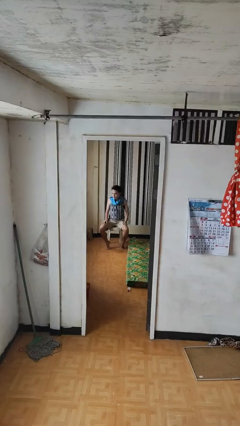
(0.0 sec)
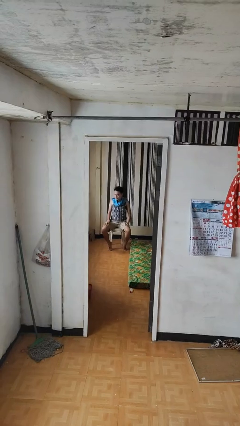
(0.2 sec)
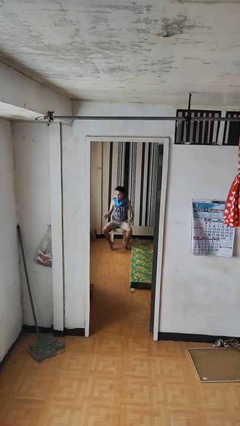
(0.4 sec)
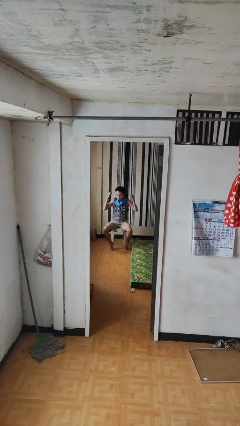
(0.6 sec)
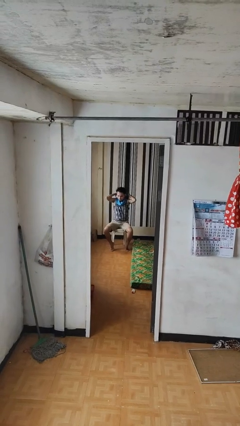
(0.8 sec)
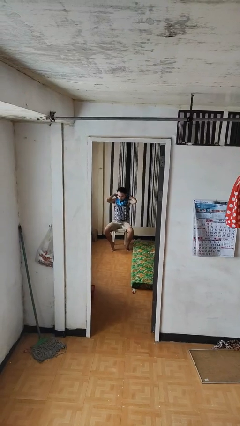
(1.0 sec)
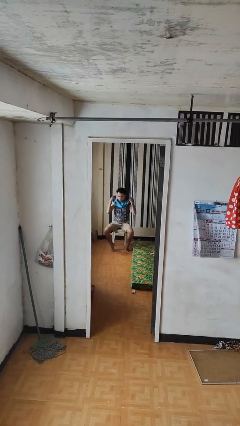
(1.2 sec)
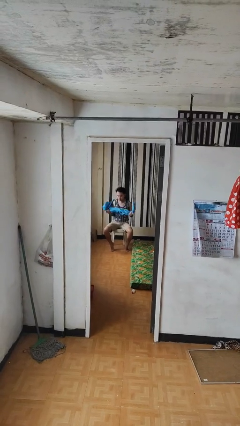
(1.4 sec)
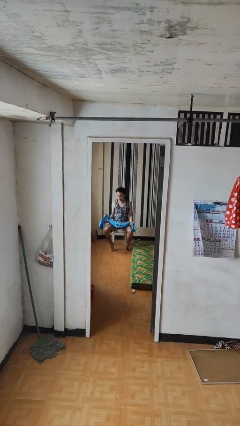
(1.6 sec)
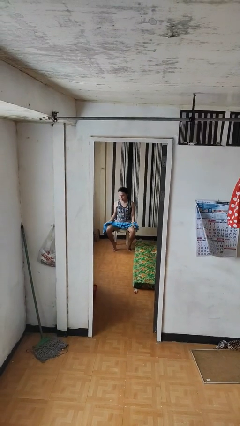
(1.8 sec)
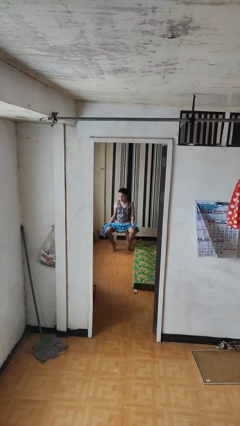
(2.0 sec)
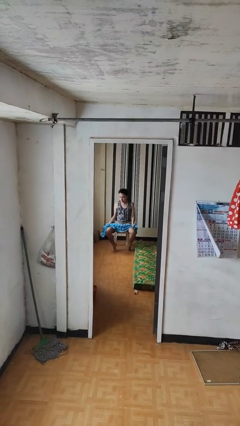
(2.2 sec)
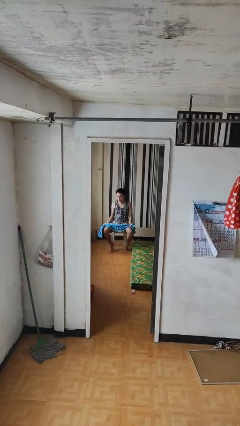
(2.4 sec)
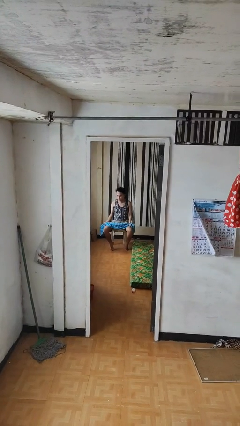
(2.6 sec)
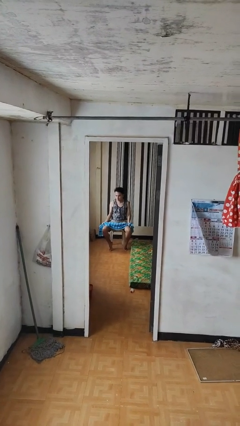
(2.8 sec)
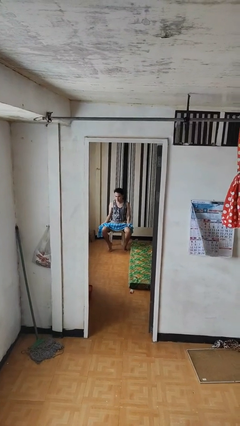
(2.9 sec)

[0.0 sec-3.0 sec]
person takes off scarf

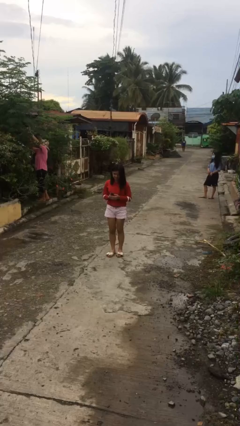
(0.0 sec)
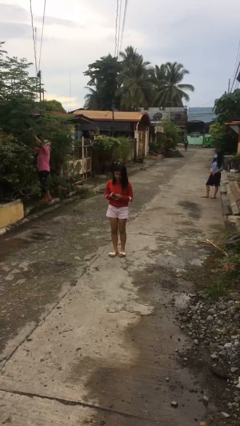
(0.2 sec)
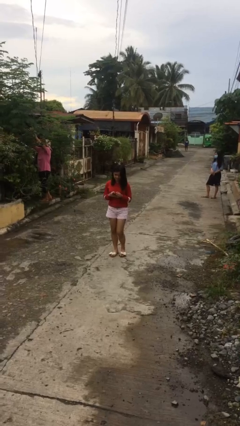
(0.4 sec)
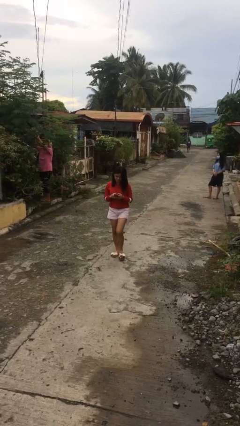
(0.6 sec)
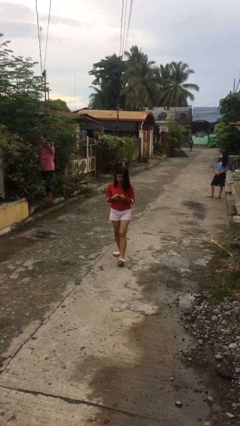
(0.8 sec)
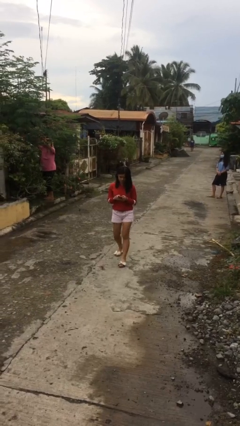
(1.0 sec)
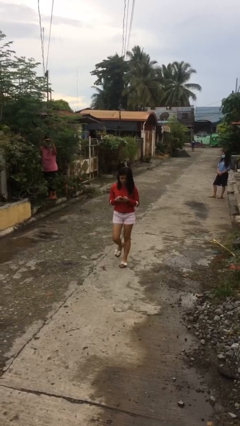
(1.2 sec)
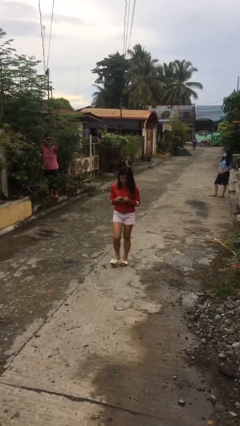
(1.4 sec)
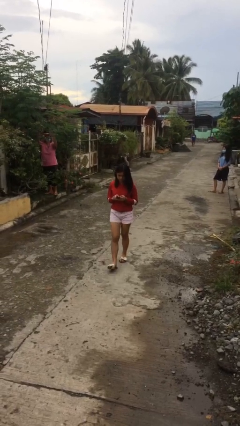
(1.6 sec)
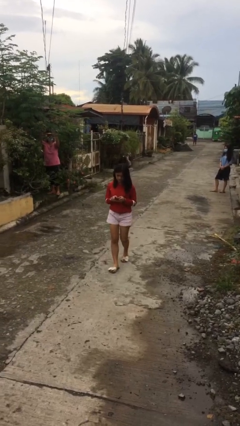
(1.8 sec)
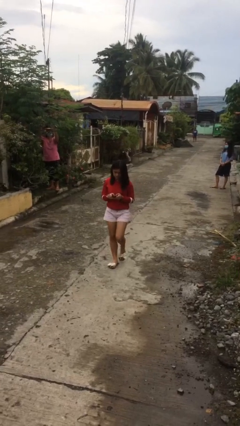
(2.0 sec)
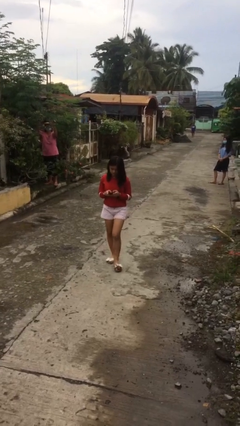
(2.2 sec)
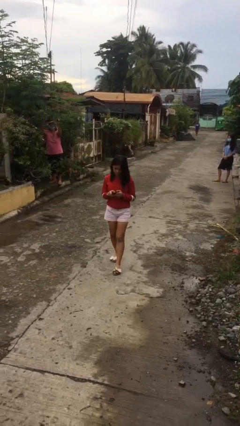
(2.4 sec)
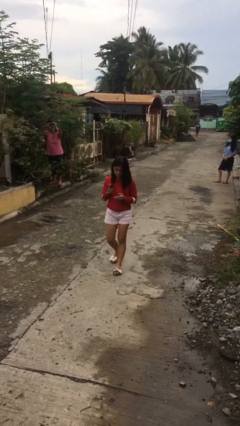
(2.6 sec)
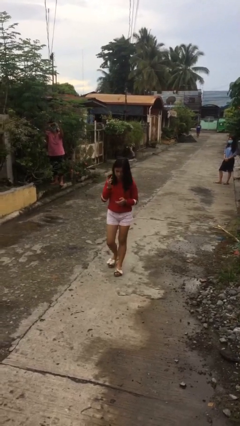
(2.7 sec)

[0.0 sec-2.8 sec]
person texts on phone

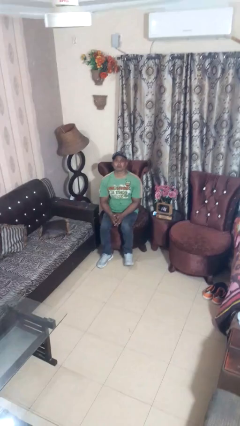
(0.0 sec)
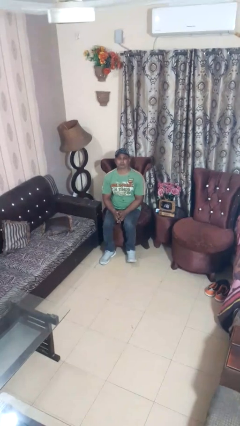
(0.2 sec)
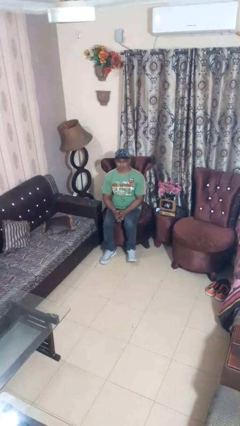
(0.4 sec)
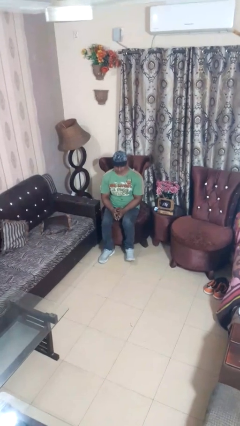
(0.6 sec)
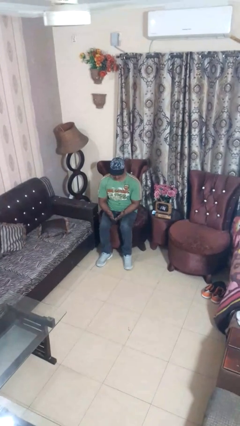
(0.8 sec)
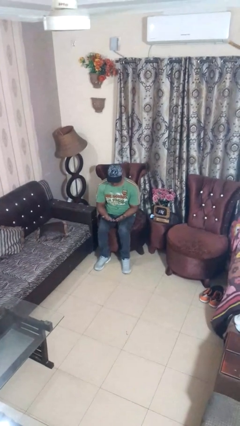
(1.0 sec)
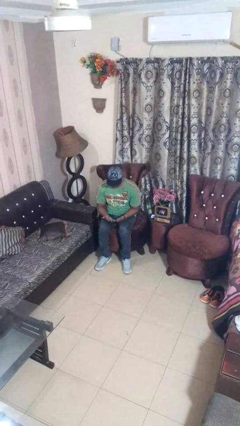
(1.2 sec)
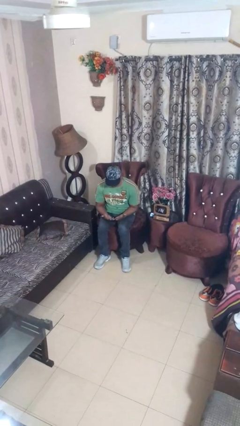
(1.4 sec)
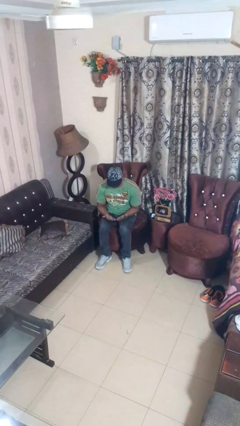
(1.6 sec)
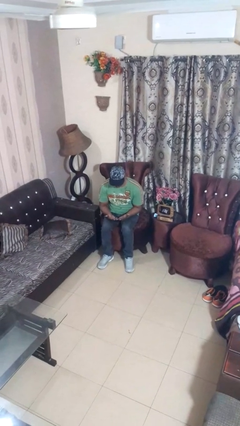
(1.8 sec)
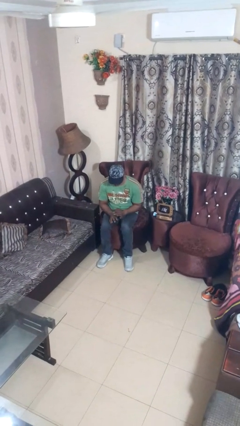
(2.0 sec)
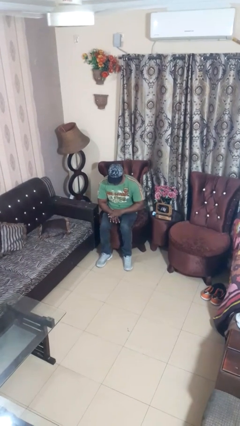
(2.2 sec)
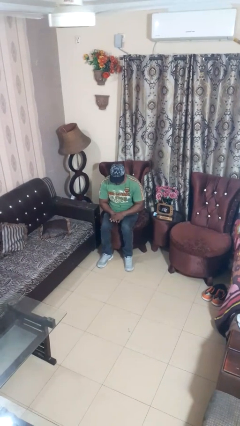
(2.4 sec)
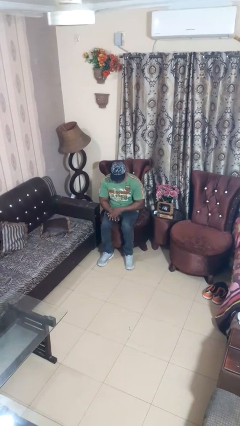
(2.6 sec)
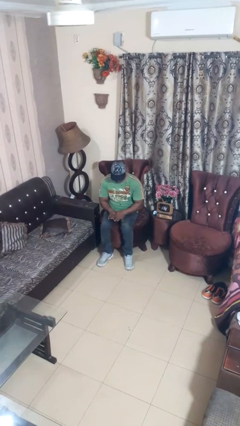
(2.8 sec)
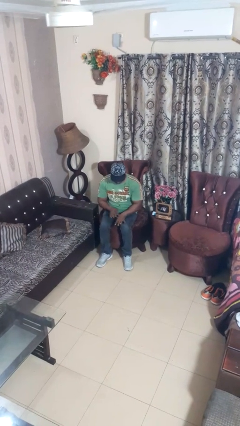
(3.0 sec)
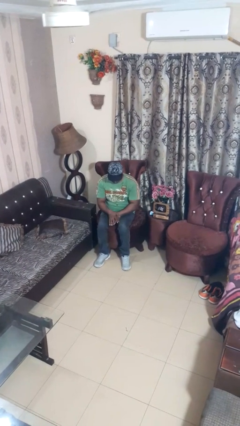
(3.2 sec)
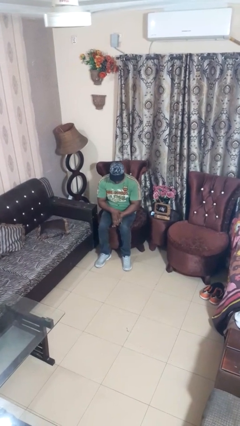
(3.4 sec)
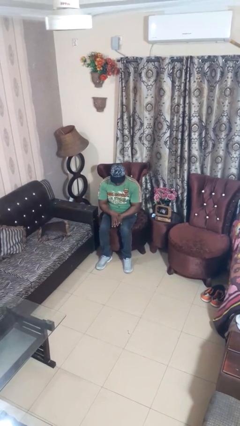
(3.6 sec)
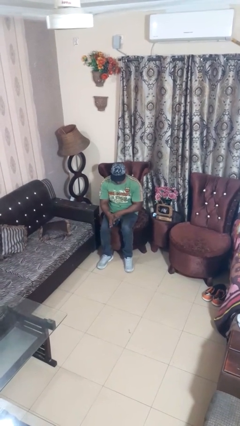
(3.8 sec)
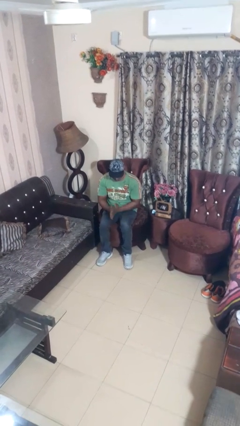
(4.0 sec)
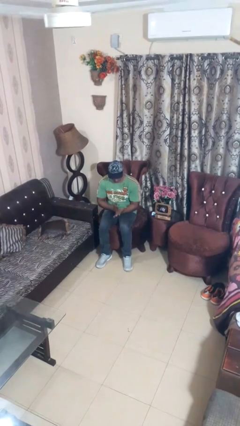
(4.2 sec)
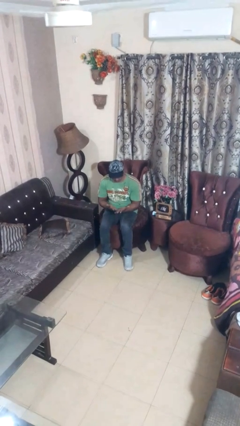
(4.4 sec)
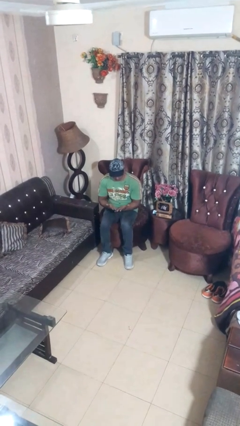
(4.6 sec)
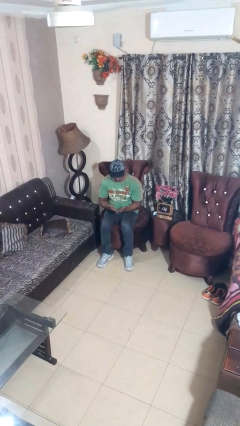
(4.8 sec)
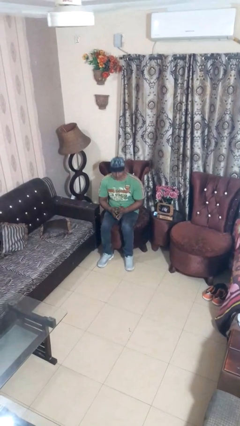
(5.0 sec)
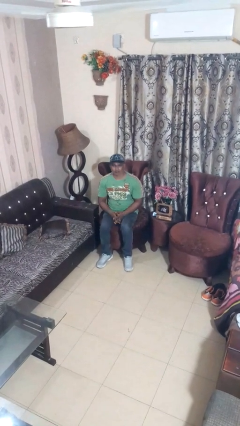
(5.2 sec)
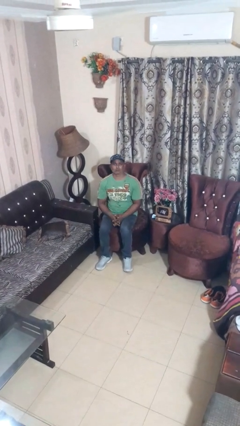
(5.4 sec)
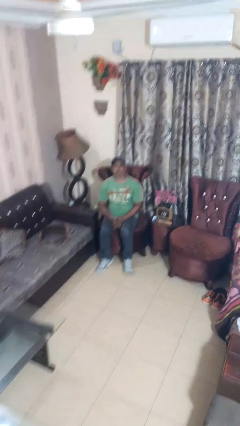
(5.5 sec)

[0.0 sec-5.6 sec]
person looks at hands in lap

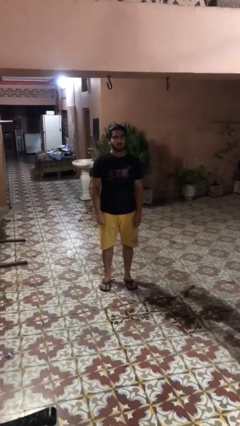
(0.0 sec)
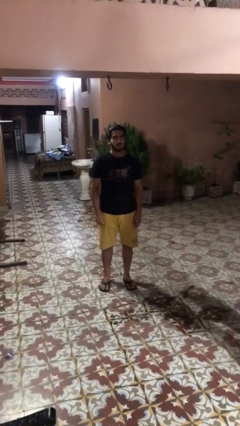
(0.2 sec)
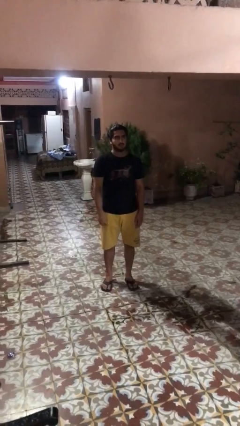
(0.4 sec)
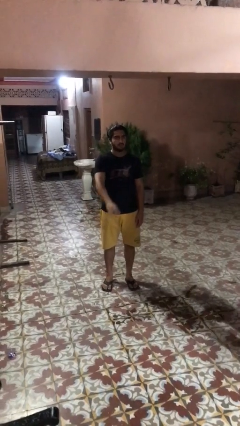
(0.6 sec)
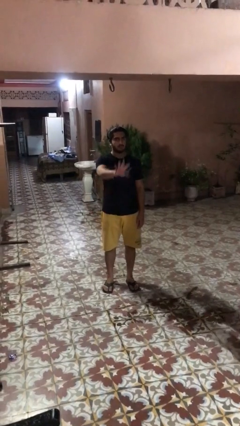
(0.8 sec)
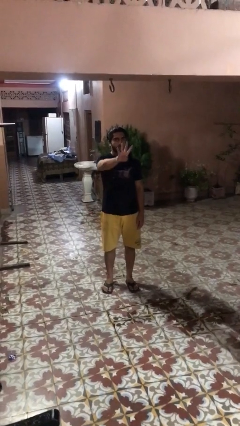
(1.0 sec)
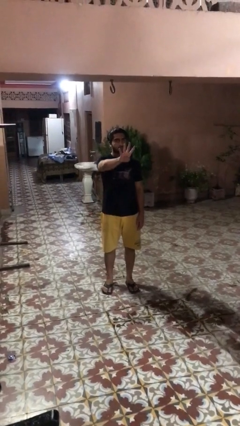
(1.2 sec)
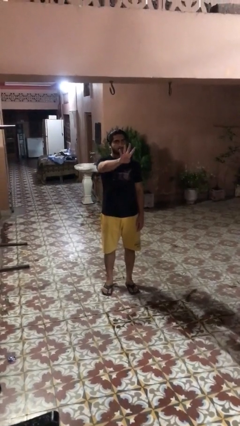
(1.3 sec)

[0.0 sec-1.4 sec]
person gestures number four

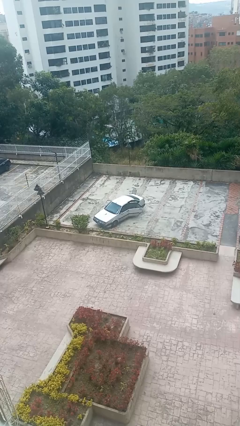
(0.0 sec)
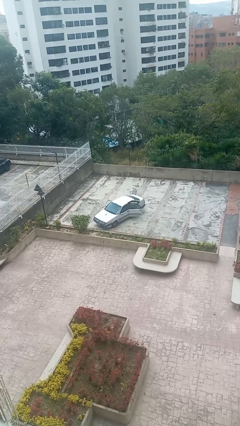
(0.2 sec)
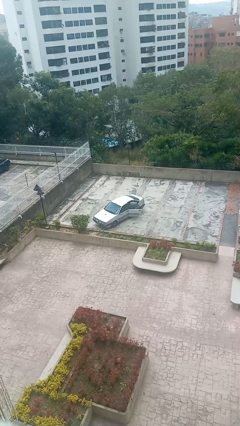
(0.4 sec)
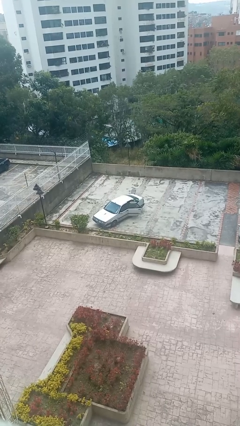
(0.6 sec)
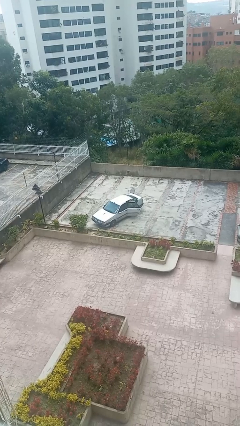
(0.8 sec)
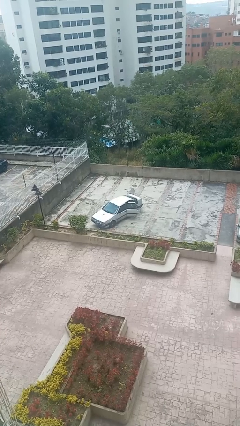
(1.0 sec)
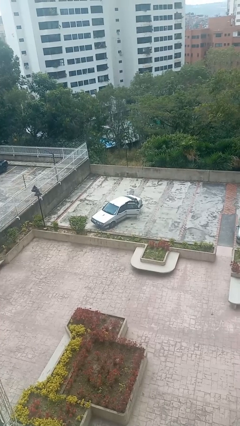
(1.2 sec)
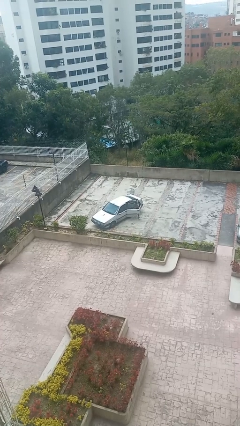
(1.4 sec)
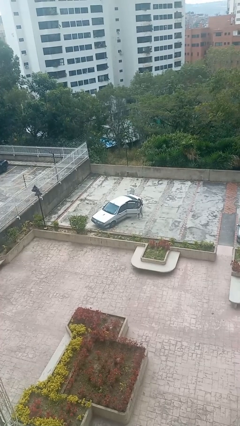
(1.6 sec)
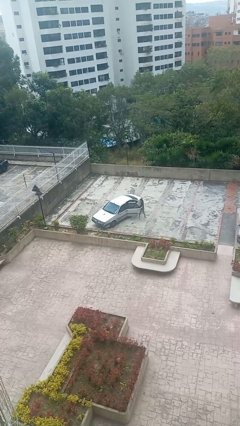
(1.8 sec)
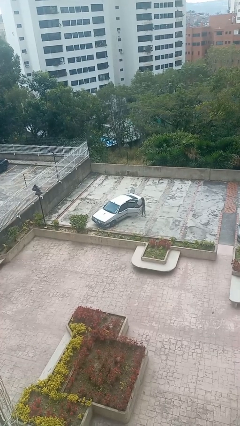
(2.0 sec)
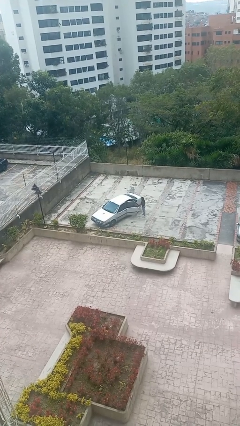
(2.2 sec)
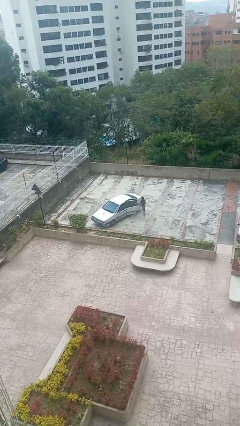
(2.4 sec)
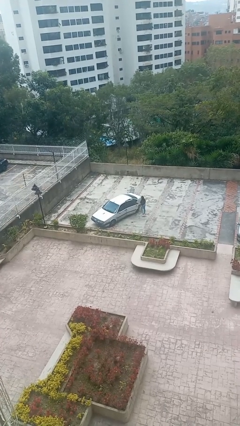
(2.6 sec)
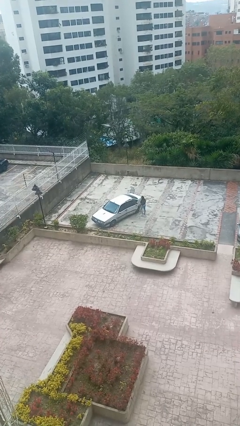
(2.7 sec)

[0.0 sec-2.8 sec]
car drops off person

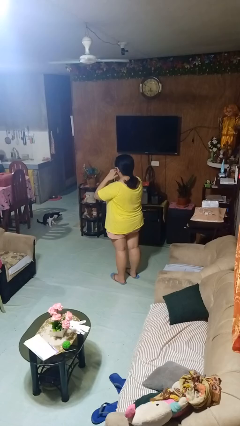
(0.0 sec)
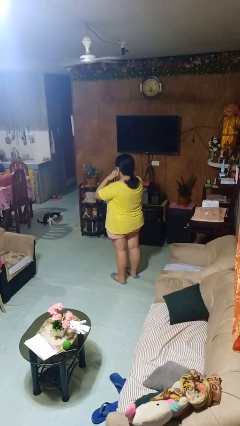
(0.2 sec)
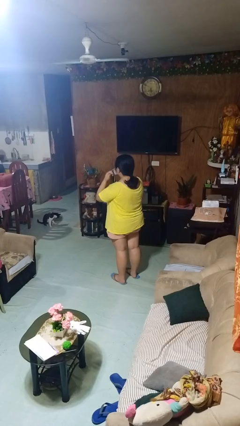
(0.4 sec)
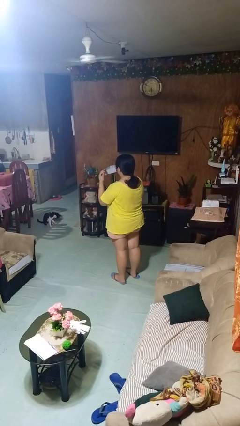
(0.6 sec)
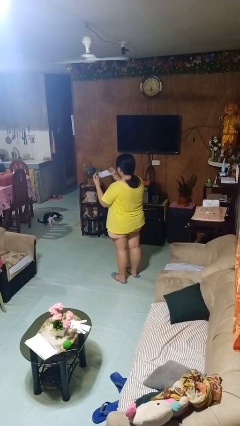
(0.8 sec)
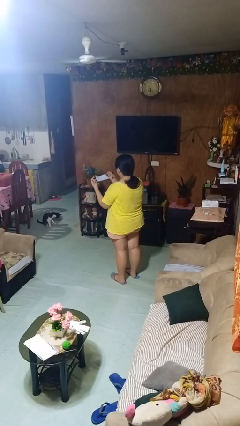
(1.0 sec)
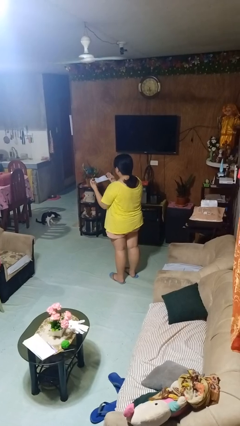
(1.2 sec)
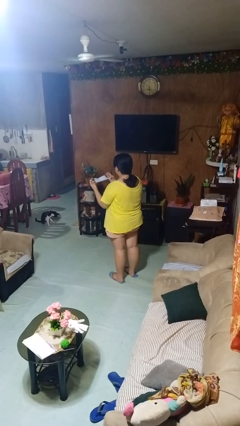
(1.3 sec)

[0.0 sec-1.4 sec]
person takes off facemask
